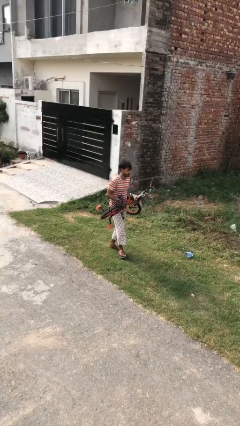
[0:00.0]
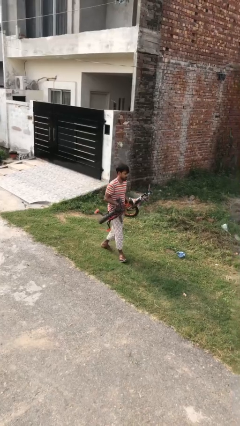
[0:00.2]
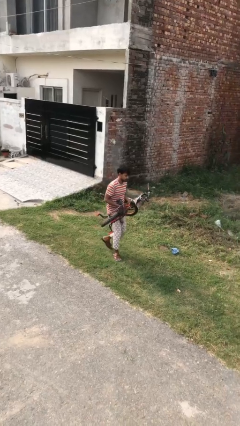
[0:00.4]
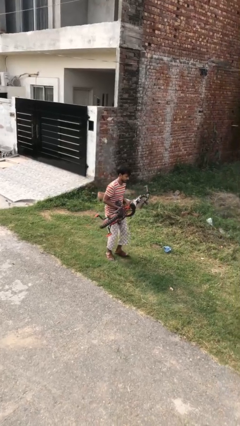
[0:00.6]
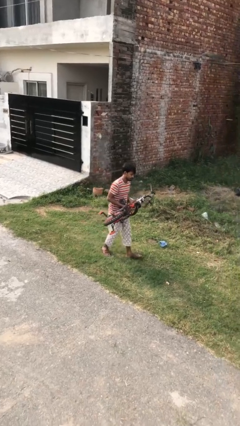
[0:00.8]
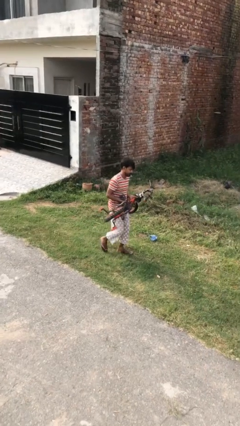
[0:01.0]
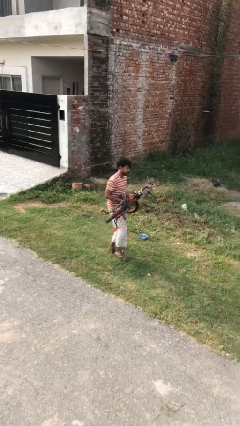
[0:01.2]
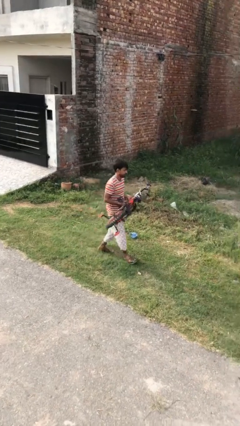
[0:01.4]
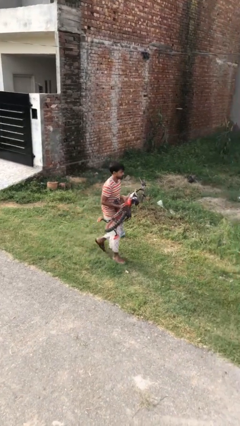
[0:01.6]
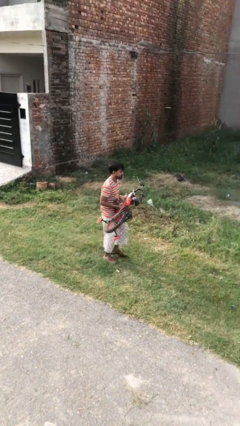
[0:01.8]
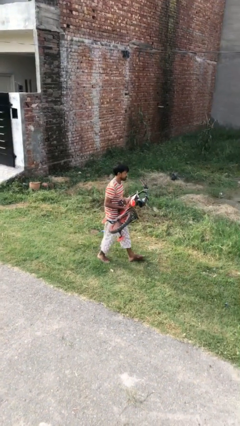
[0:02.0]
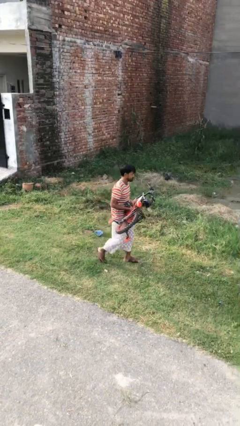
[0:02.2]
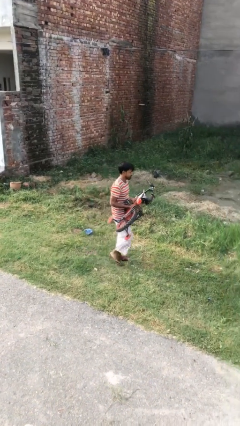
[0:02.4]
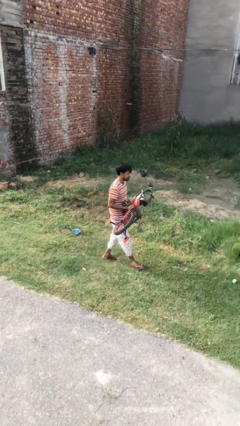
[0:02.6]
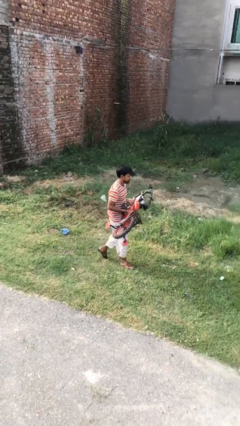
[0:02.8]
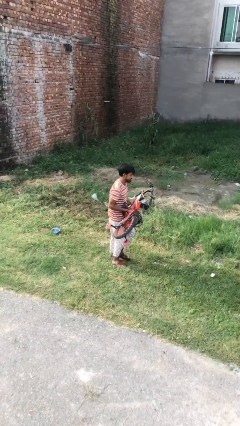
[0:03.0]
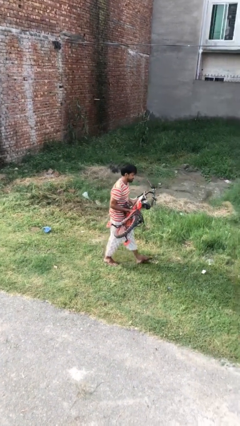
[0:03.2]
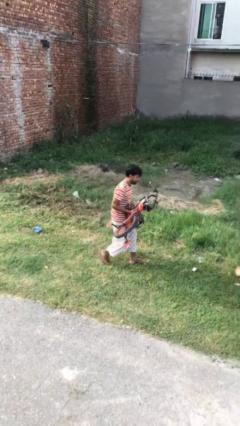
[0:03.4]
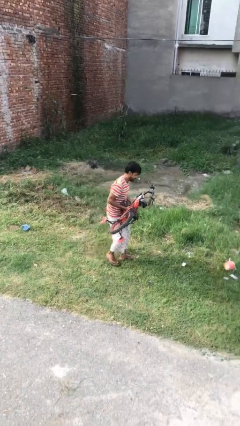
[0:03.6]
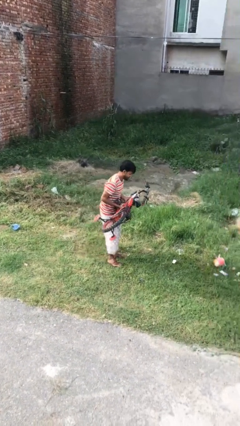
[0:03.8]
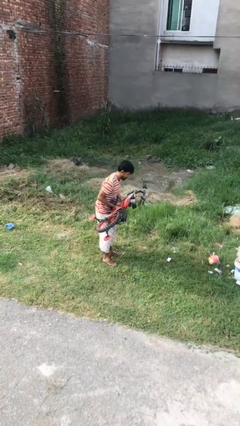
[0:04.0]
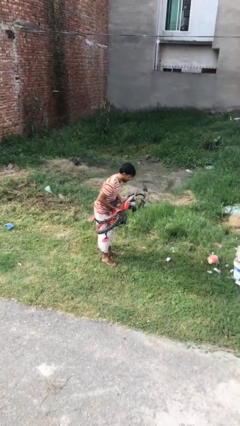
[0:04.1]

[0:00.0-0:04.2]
person carries heavy object

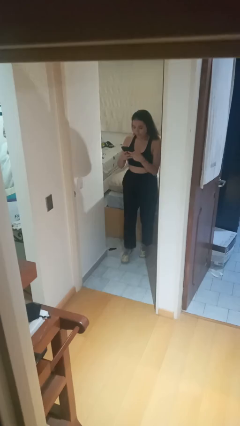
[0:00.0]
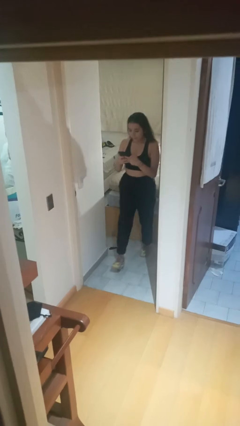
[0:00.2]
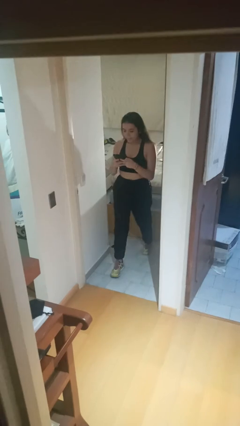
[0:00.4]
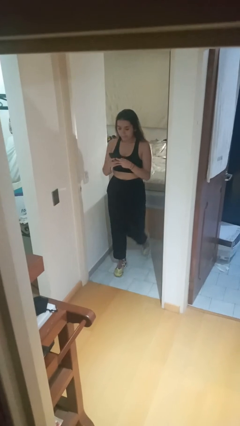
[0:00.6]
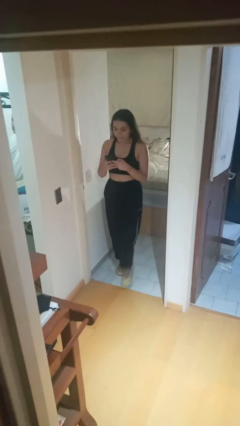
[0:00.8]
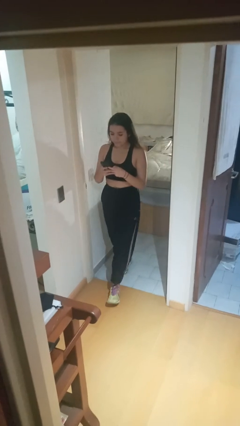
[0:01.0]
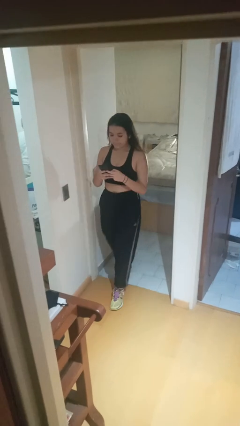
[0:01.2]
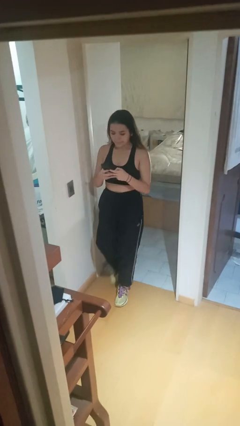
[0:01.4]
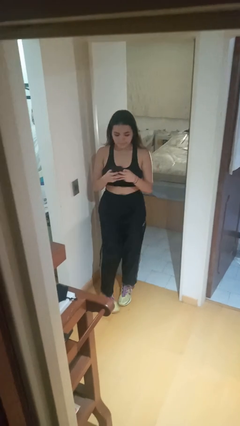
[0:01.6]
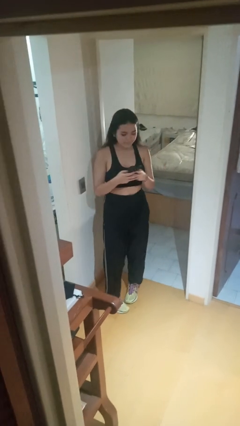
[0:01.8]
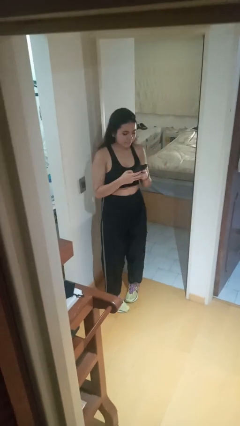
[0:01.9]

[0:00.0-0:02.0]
person enters scene through structure

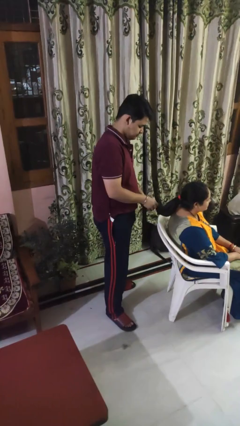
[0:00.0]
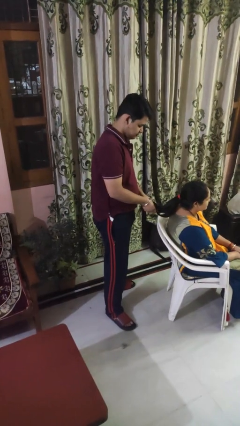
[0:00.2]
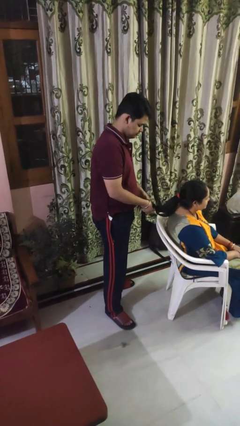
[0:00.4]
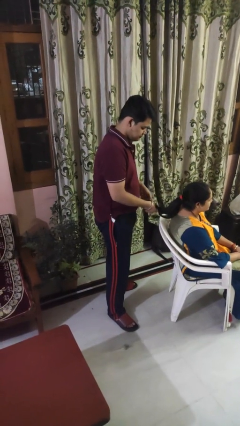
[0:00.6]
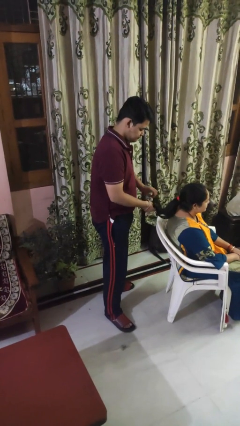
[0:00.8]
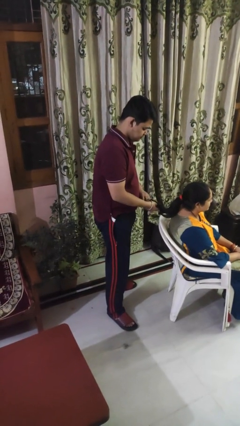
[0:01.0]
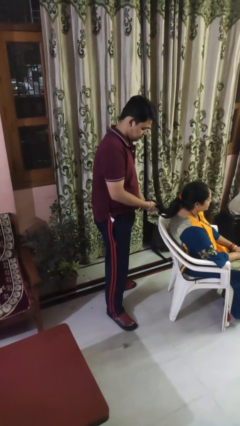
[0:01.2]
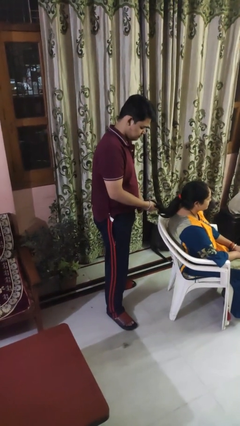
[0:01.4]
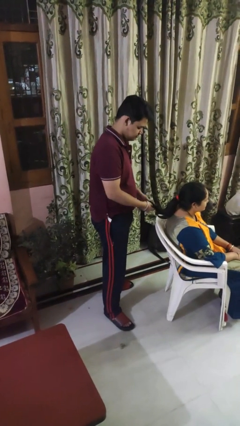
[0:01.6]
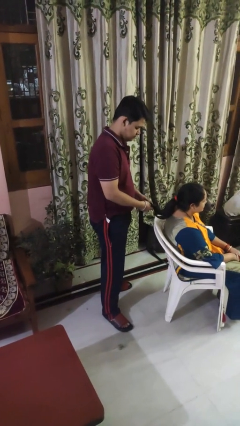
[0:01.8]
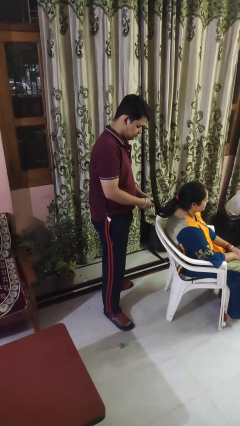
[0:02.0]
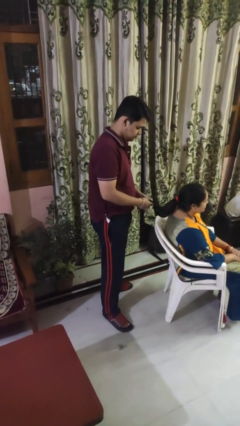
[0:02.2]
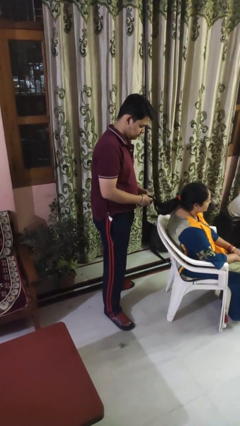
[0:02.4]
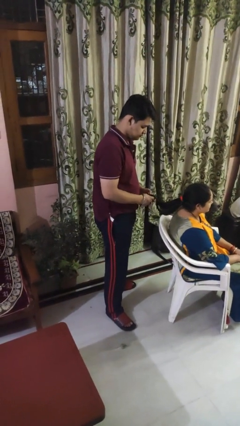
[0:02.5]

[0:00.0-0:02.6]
person braids hair of person

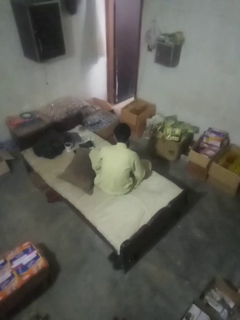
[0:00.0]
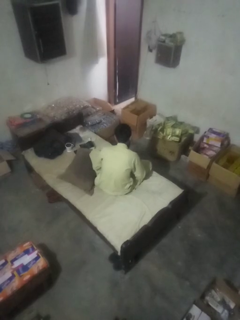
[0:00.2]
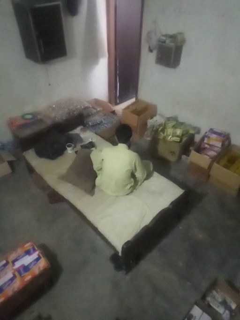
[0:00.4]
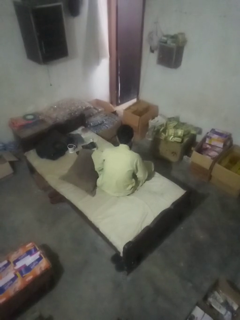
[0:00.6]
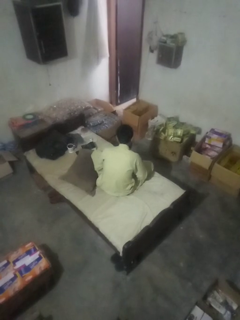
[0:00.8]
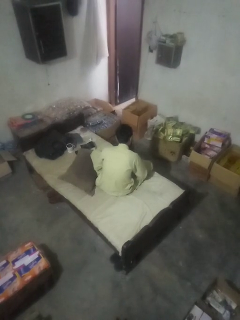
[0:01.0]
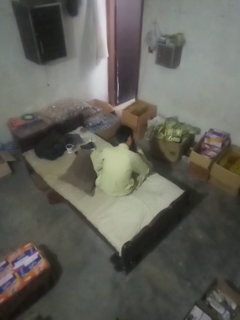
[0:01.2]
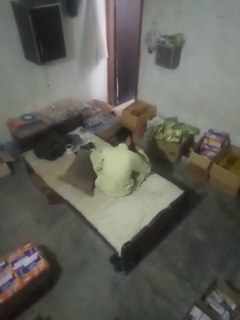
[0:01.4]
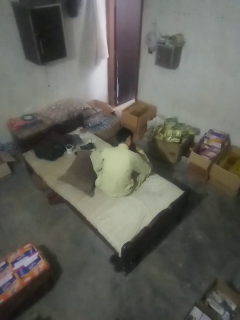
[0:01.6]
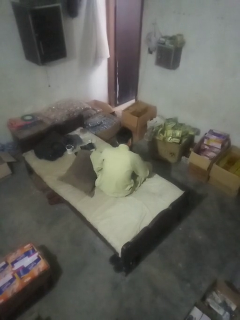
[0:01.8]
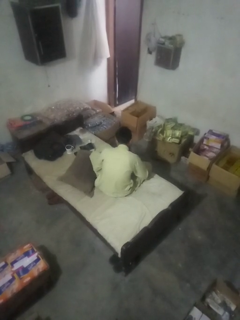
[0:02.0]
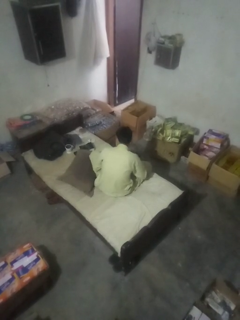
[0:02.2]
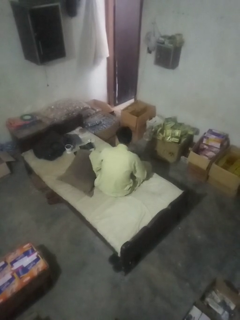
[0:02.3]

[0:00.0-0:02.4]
person blows nose

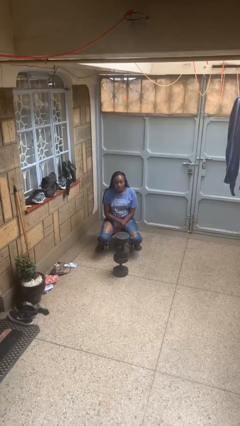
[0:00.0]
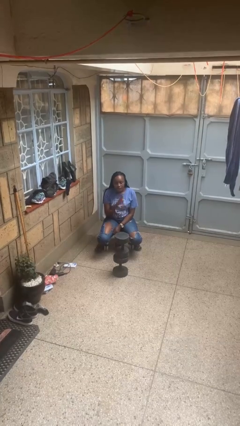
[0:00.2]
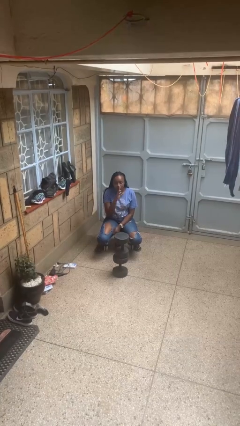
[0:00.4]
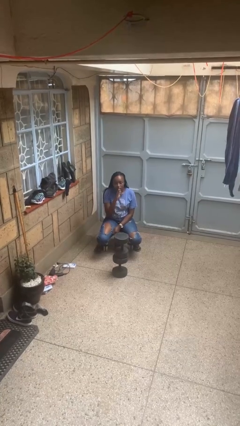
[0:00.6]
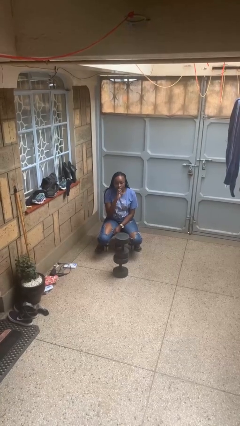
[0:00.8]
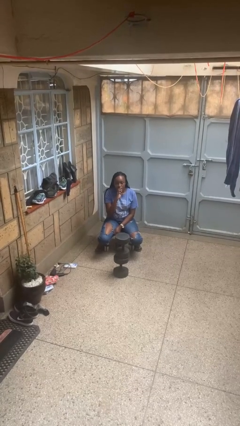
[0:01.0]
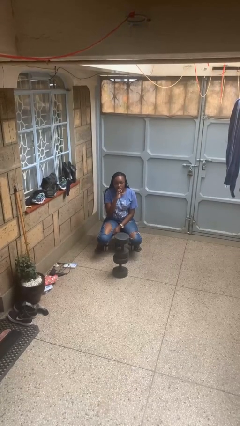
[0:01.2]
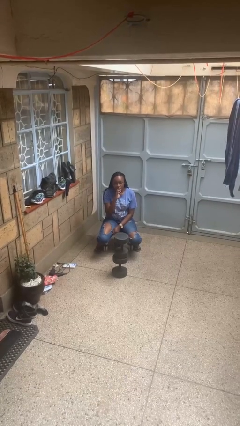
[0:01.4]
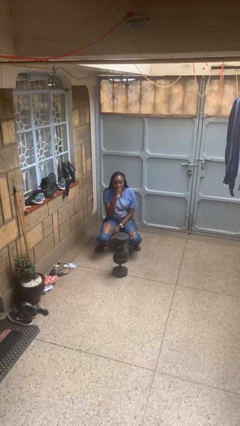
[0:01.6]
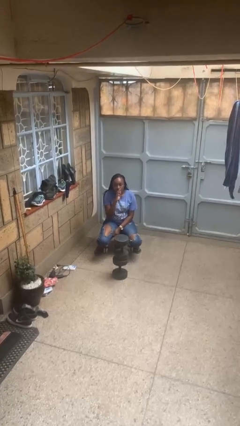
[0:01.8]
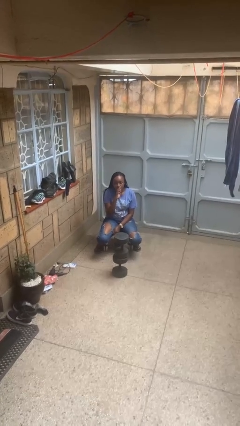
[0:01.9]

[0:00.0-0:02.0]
person gestures be quiet

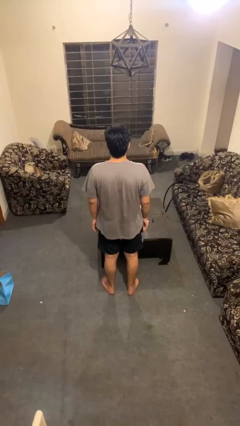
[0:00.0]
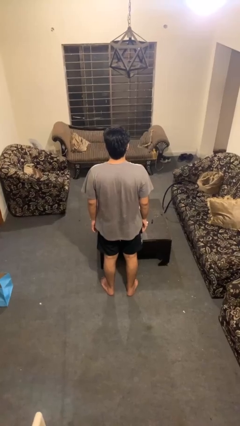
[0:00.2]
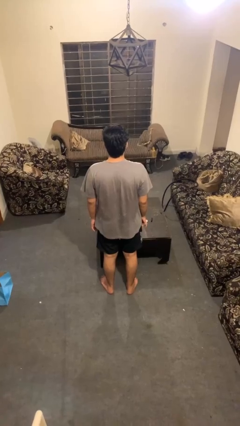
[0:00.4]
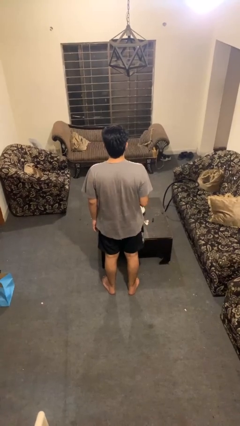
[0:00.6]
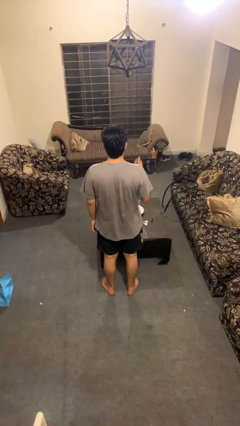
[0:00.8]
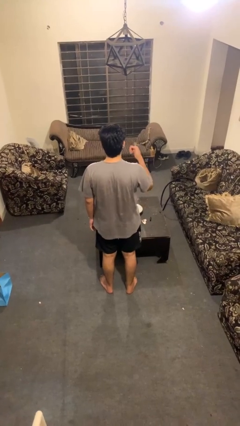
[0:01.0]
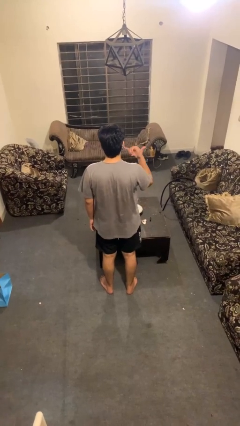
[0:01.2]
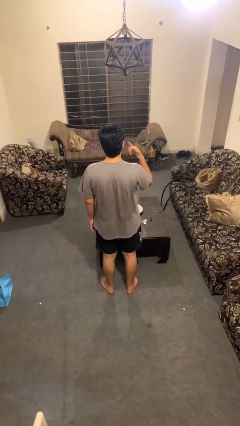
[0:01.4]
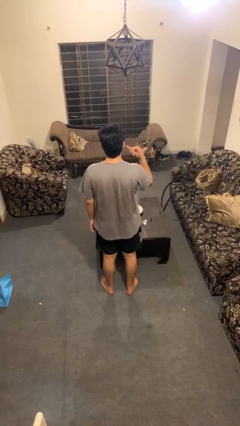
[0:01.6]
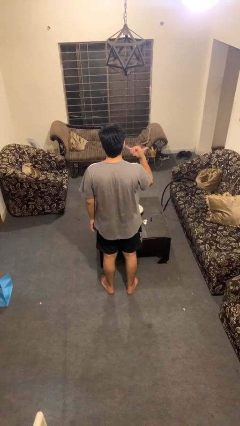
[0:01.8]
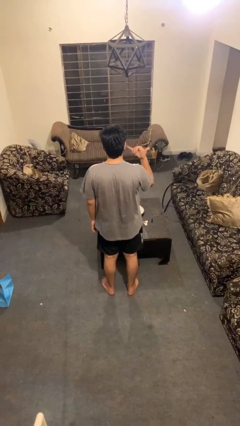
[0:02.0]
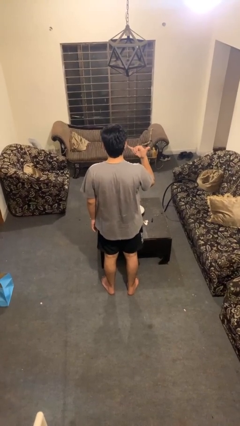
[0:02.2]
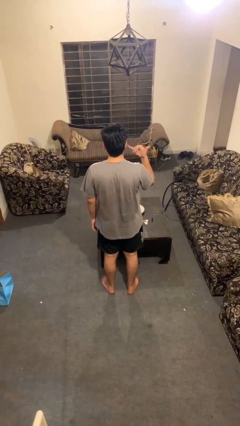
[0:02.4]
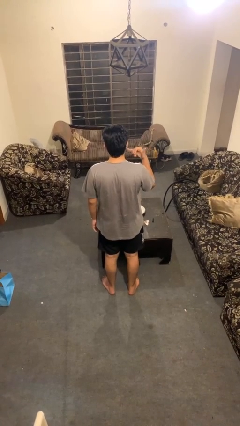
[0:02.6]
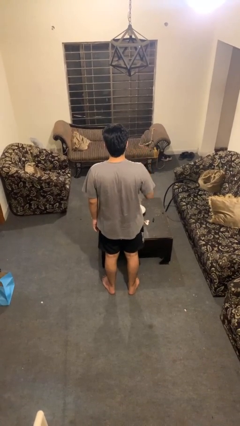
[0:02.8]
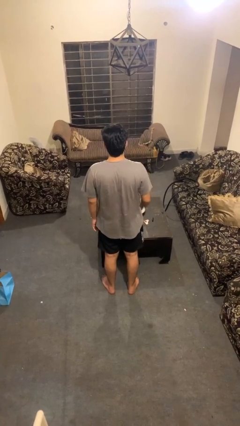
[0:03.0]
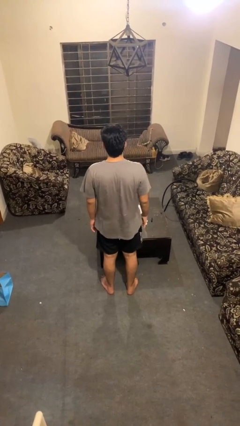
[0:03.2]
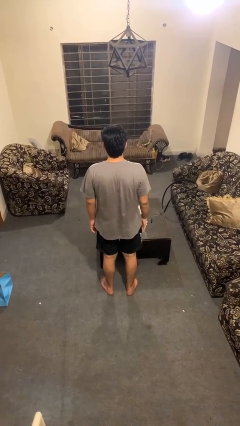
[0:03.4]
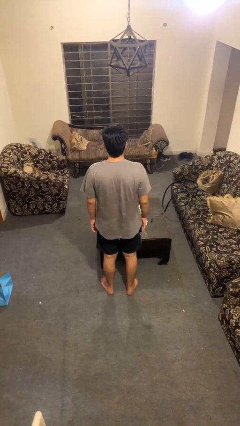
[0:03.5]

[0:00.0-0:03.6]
person gestures hang loose

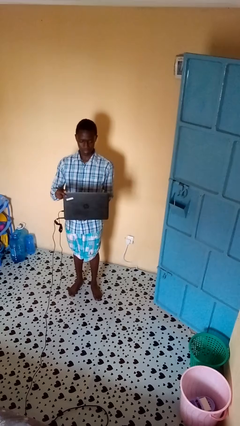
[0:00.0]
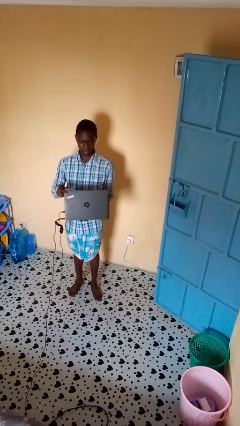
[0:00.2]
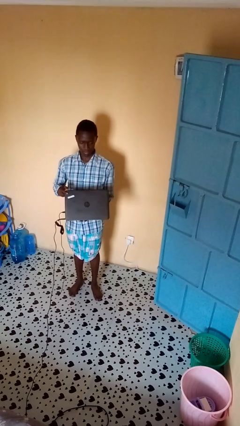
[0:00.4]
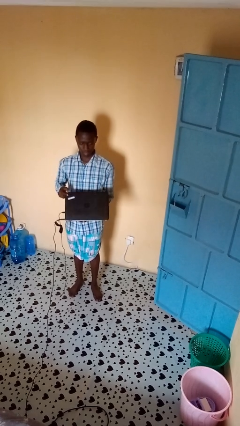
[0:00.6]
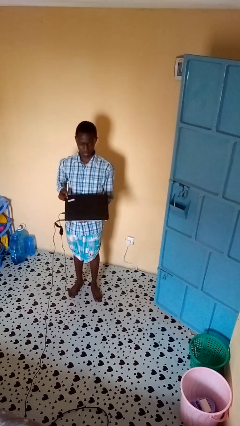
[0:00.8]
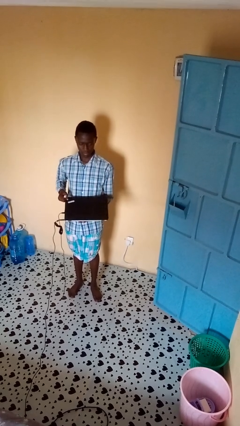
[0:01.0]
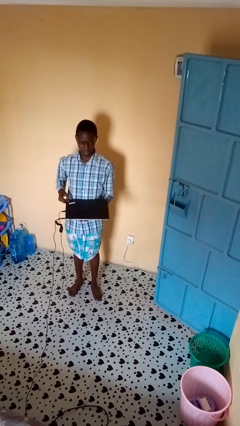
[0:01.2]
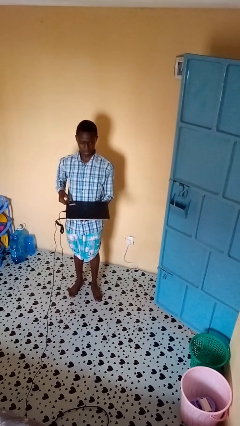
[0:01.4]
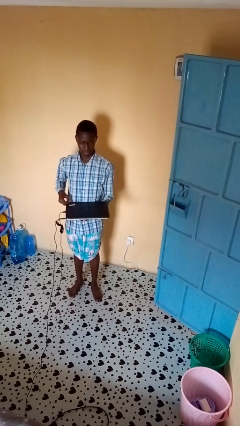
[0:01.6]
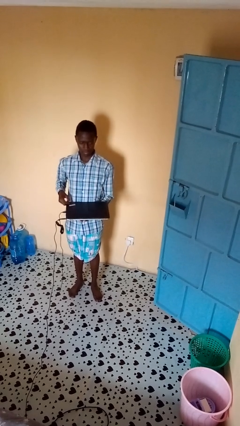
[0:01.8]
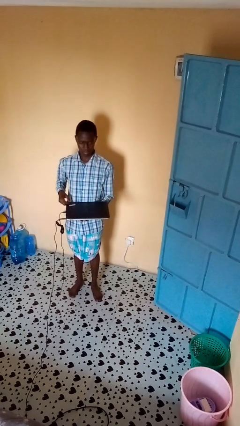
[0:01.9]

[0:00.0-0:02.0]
person closes laptop
